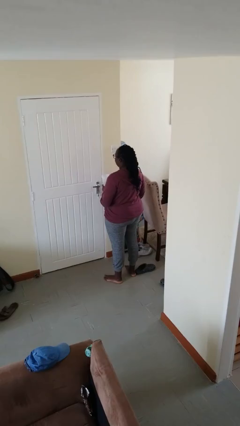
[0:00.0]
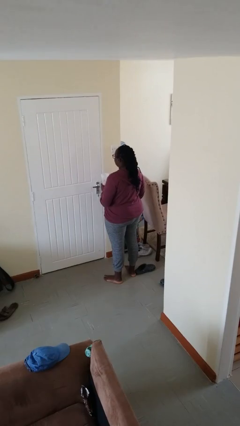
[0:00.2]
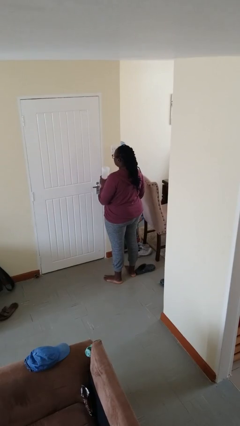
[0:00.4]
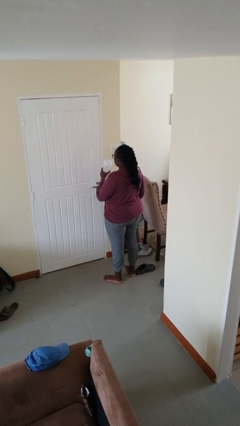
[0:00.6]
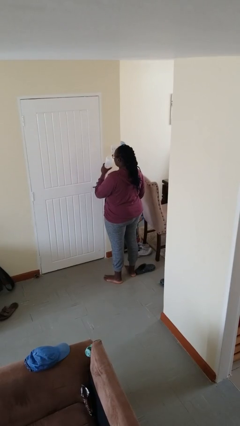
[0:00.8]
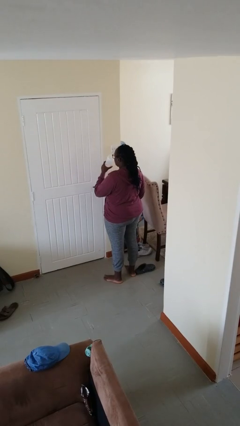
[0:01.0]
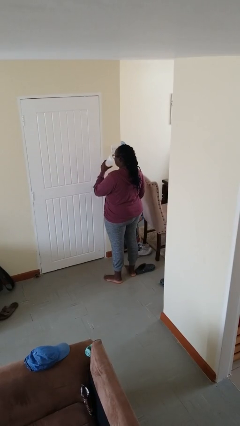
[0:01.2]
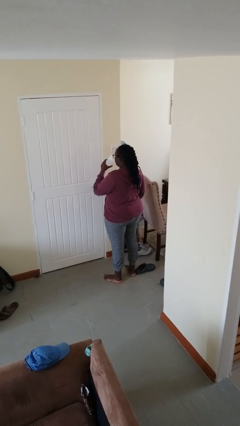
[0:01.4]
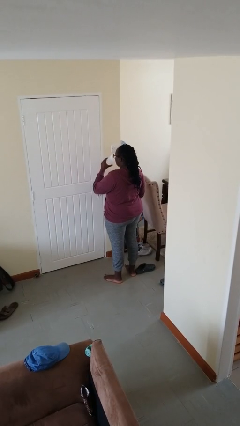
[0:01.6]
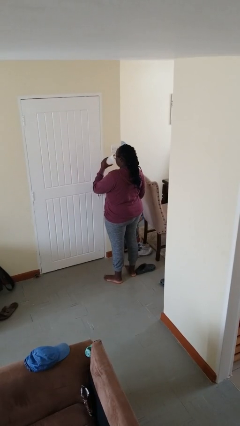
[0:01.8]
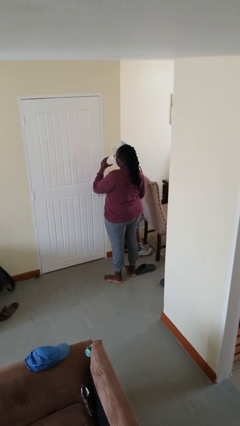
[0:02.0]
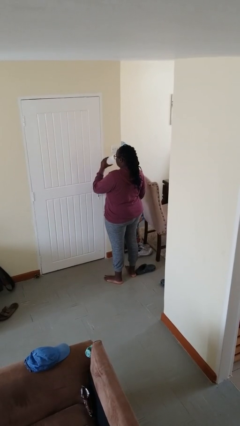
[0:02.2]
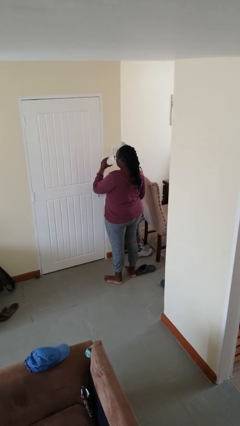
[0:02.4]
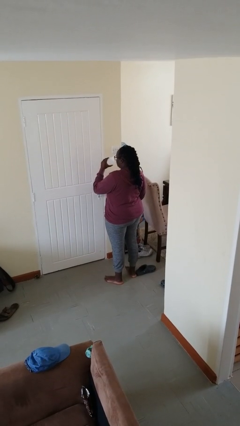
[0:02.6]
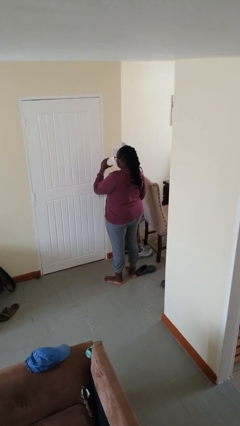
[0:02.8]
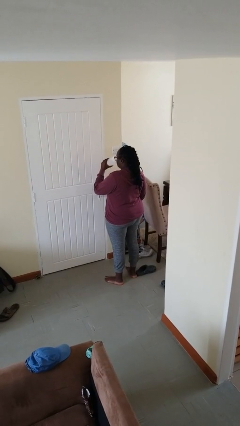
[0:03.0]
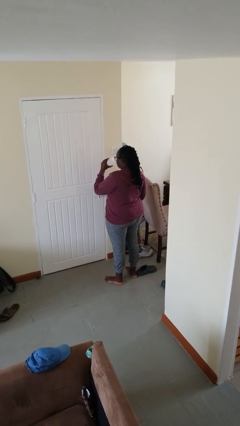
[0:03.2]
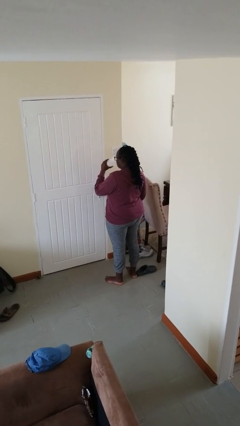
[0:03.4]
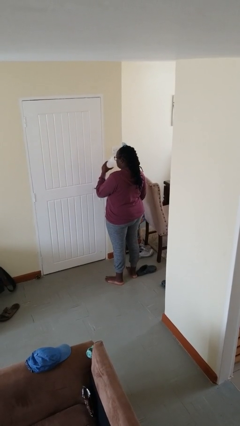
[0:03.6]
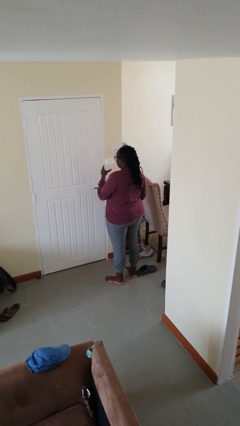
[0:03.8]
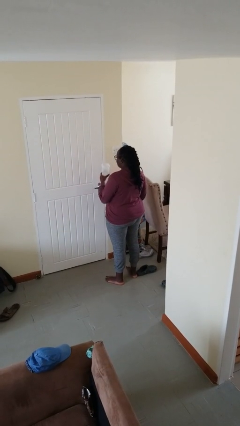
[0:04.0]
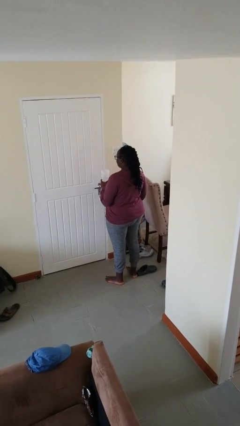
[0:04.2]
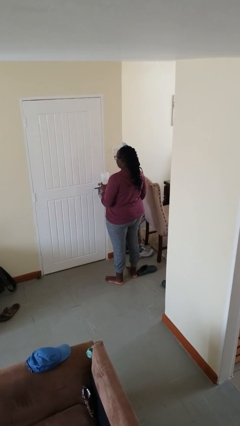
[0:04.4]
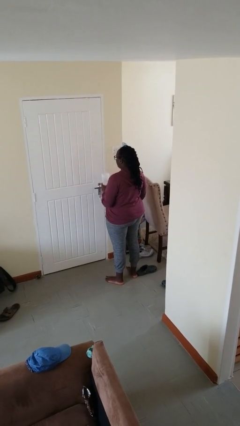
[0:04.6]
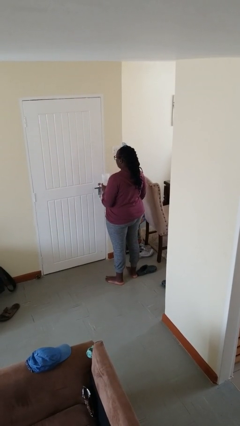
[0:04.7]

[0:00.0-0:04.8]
person drinks from bottle

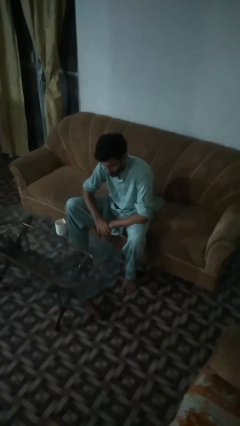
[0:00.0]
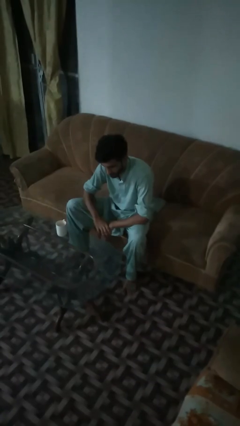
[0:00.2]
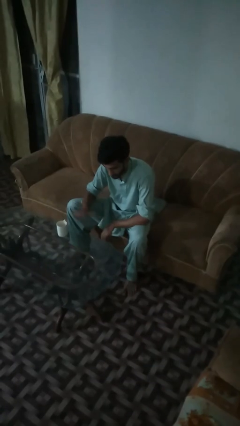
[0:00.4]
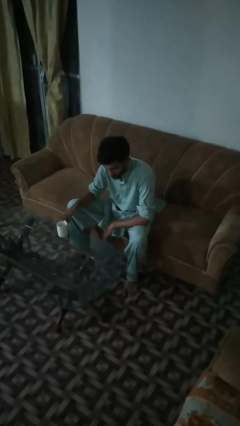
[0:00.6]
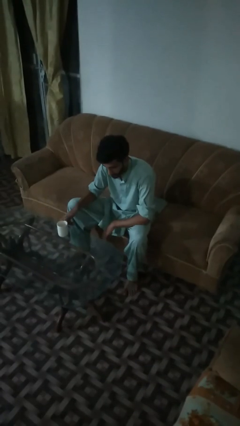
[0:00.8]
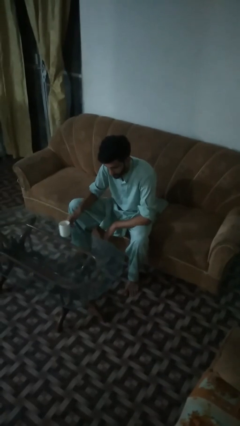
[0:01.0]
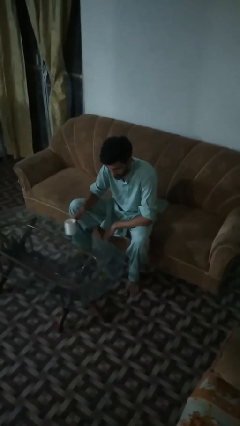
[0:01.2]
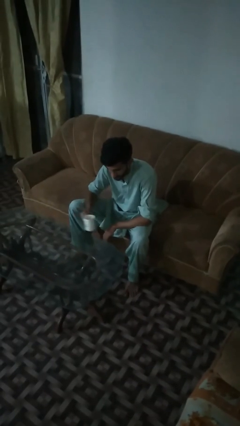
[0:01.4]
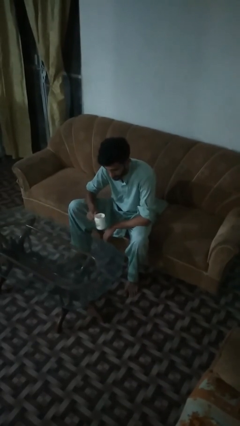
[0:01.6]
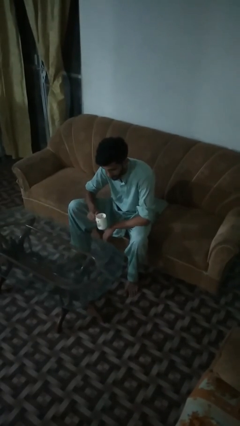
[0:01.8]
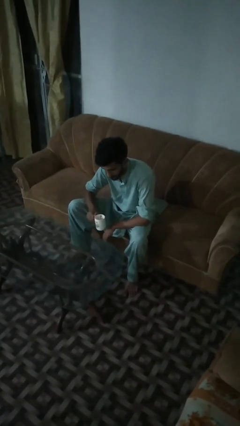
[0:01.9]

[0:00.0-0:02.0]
person picks up object from table

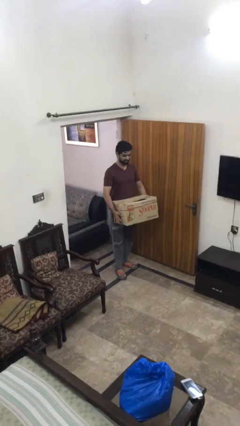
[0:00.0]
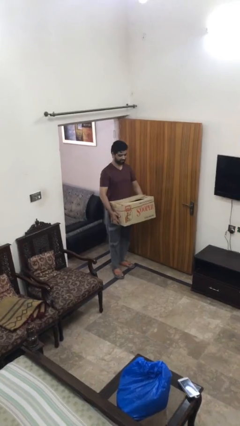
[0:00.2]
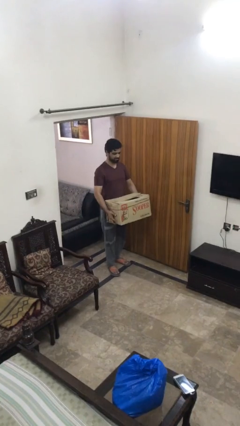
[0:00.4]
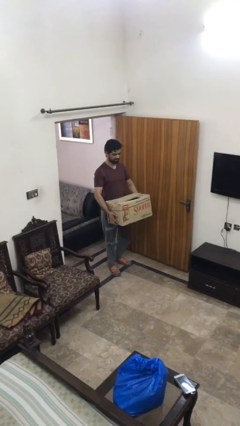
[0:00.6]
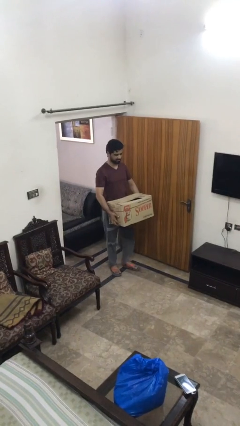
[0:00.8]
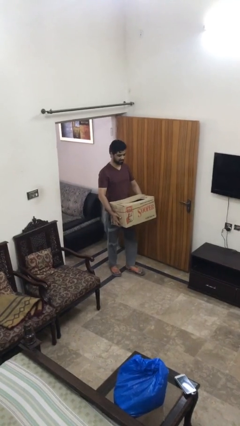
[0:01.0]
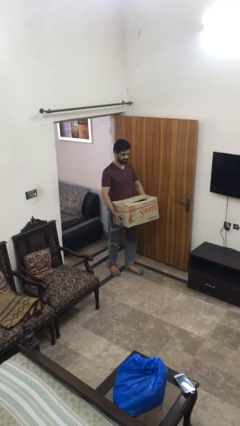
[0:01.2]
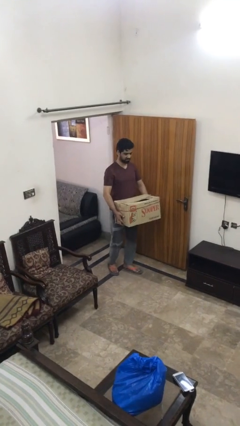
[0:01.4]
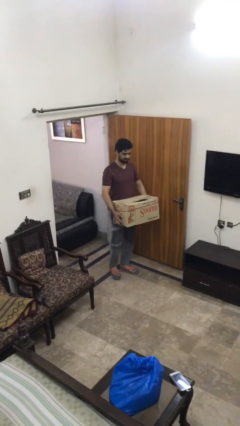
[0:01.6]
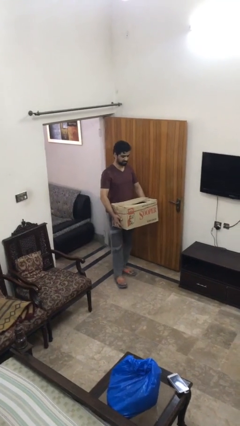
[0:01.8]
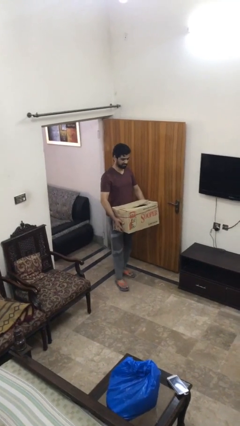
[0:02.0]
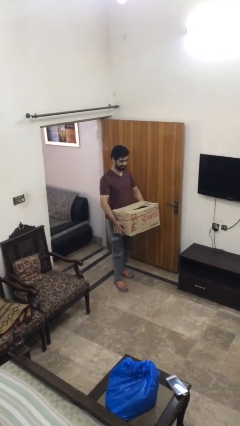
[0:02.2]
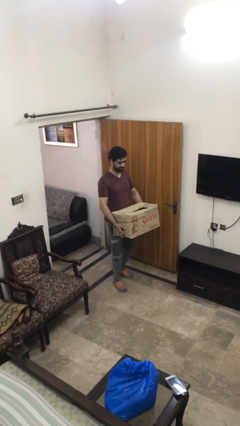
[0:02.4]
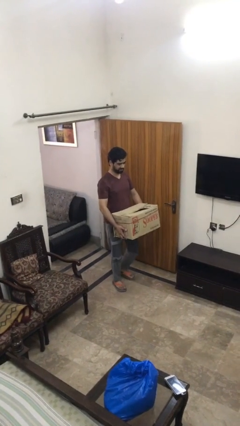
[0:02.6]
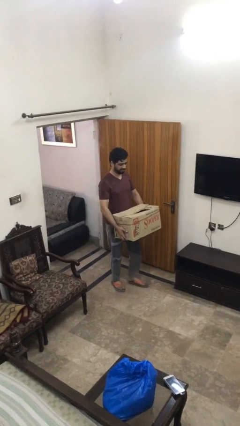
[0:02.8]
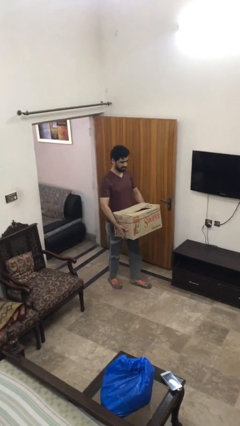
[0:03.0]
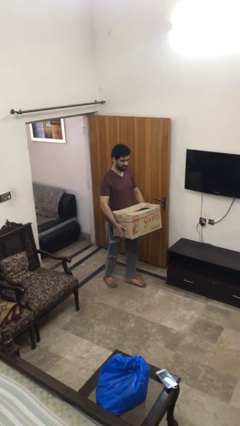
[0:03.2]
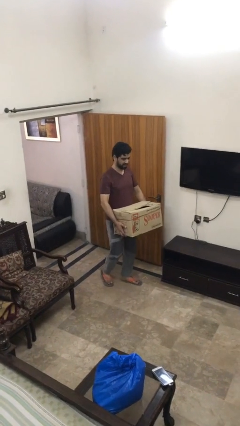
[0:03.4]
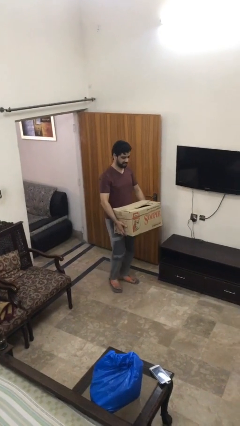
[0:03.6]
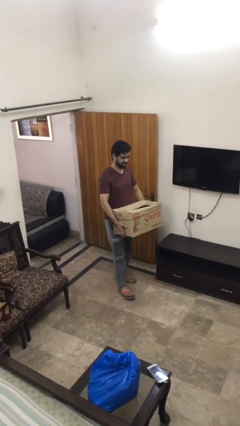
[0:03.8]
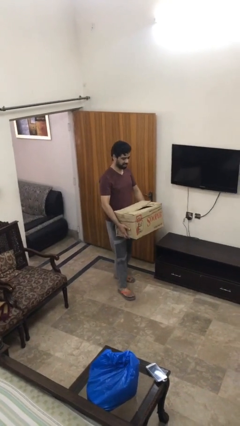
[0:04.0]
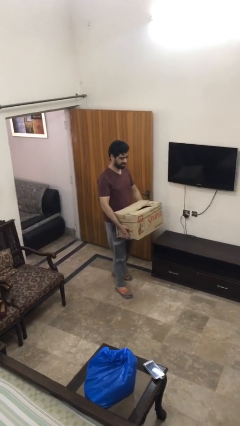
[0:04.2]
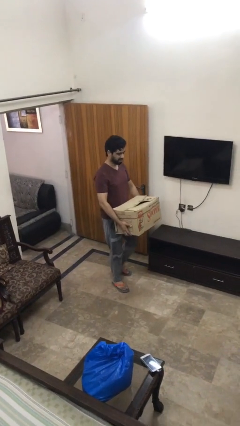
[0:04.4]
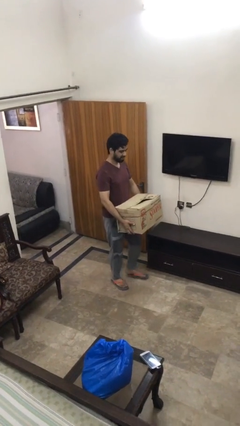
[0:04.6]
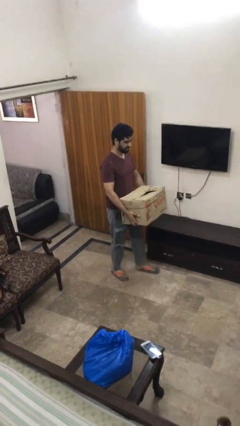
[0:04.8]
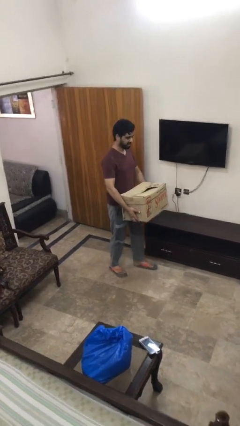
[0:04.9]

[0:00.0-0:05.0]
person carries heavy object

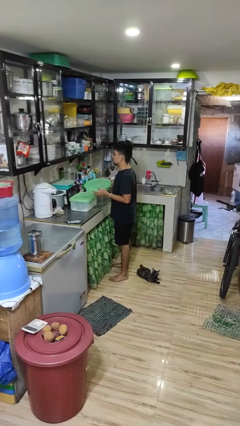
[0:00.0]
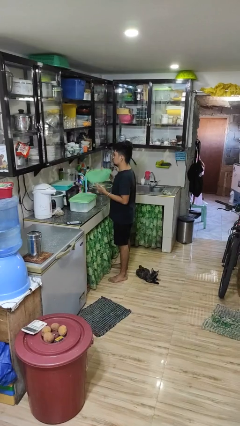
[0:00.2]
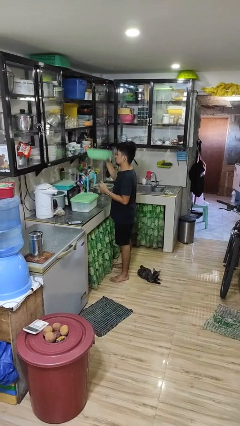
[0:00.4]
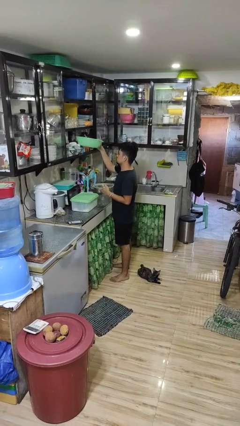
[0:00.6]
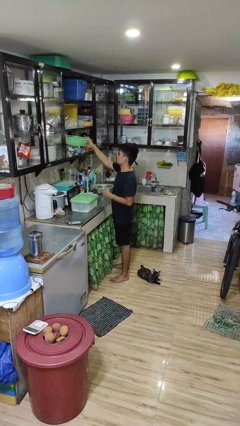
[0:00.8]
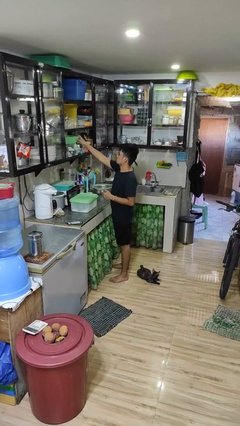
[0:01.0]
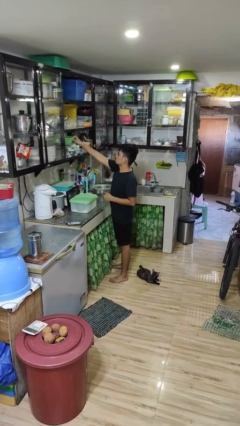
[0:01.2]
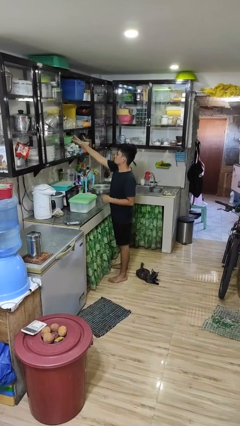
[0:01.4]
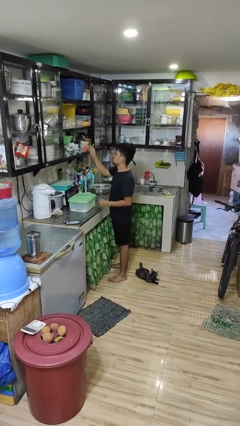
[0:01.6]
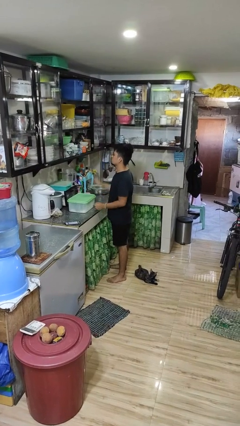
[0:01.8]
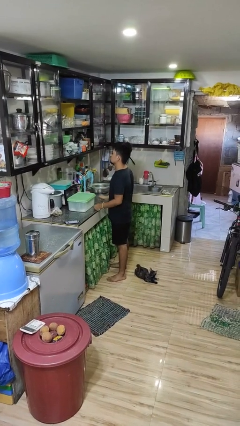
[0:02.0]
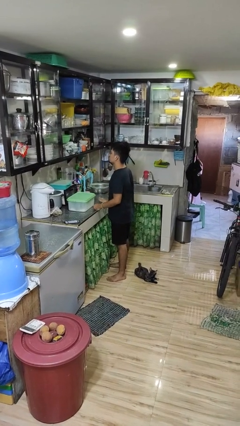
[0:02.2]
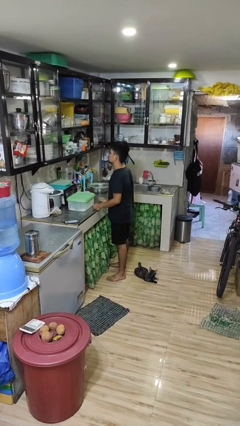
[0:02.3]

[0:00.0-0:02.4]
person puts down object into cabinet

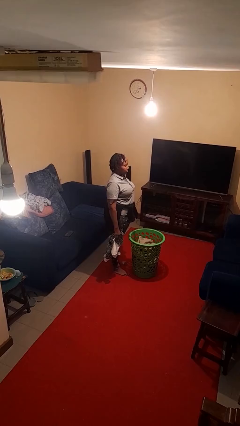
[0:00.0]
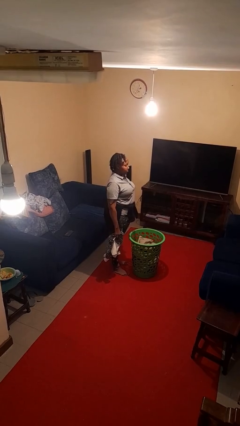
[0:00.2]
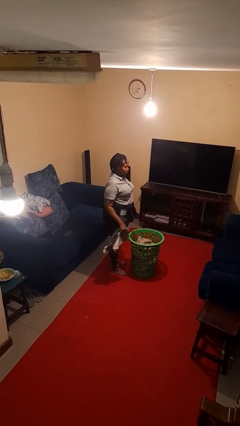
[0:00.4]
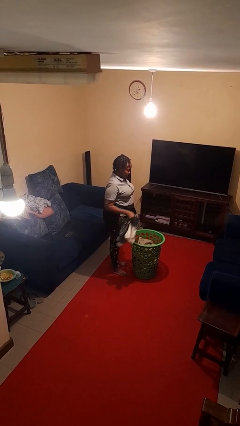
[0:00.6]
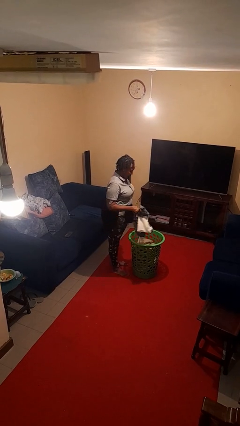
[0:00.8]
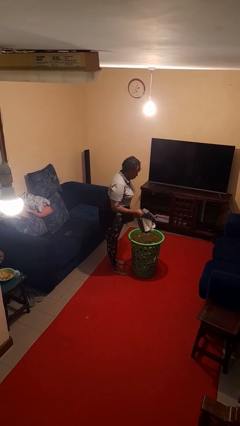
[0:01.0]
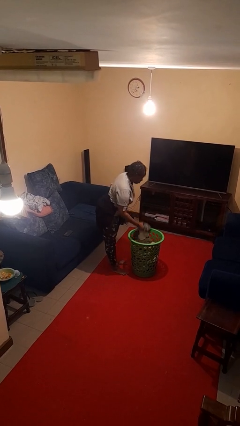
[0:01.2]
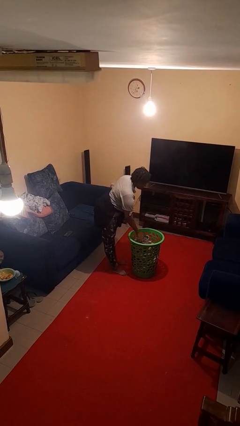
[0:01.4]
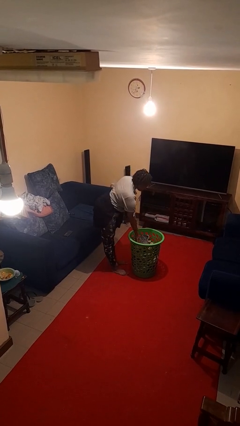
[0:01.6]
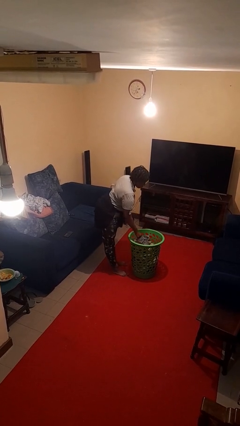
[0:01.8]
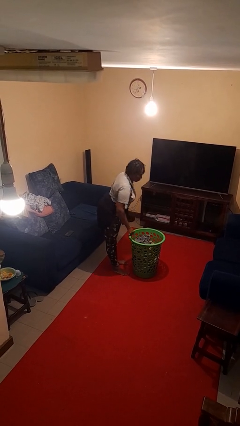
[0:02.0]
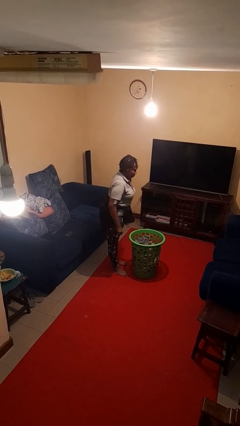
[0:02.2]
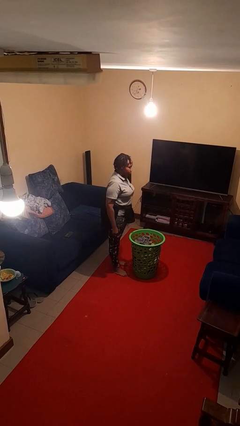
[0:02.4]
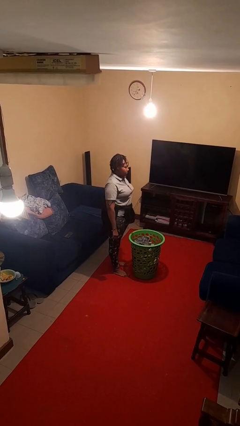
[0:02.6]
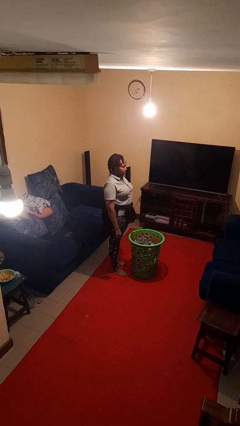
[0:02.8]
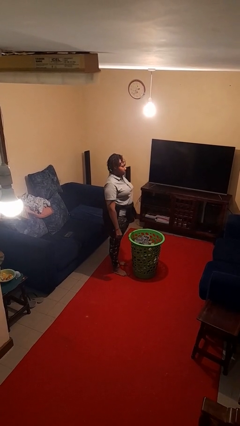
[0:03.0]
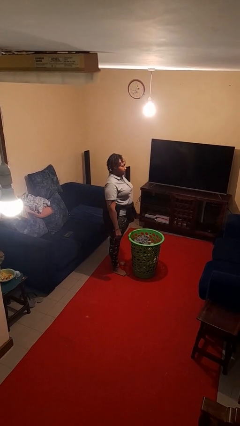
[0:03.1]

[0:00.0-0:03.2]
person puts object into basket

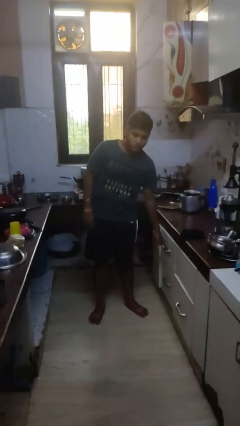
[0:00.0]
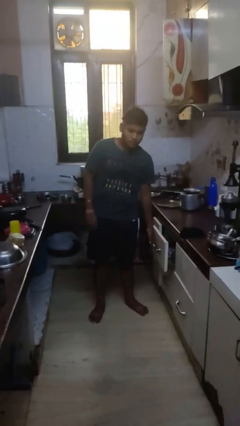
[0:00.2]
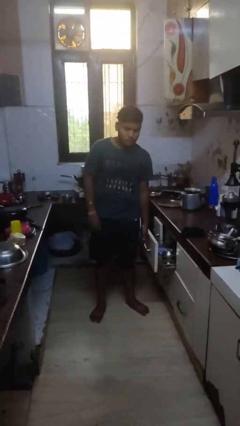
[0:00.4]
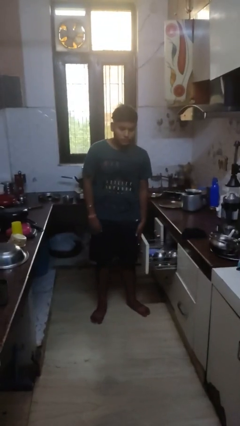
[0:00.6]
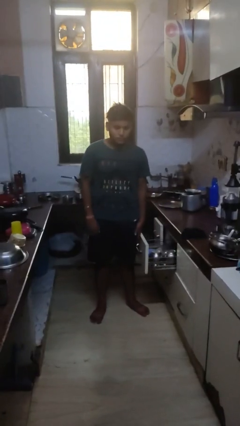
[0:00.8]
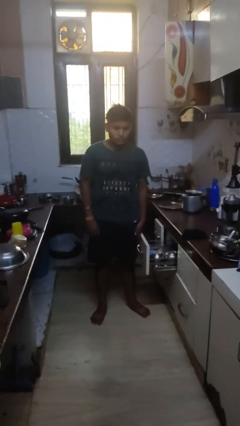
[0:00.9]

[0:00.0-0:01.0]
person opens kitchen drawer
